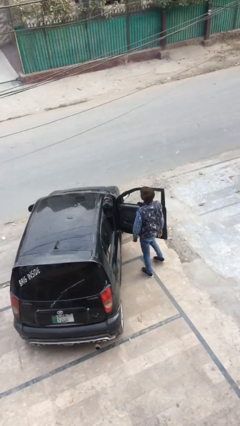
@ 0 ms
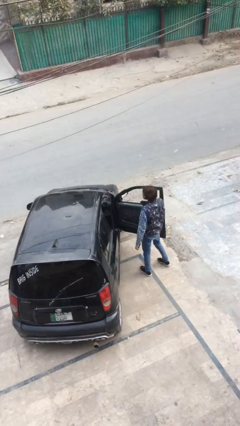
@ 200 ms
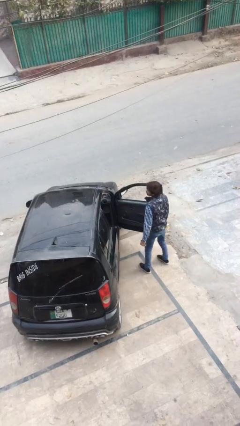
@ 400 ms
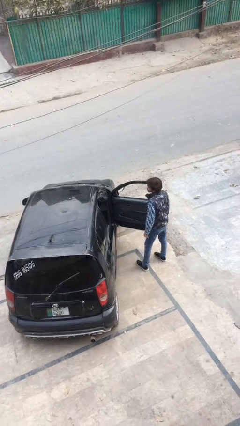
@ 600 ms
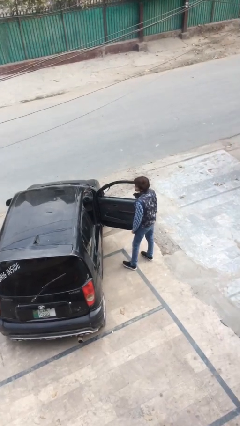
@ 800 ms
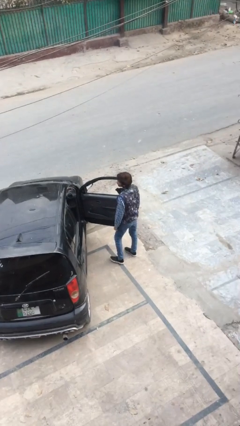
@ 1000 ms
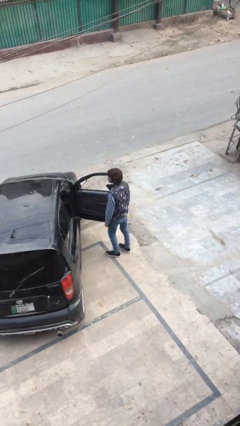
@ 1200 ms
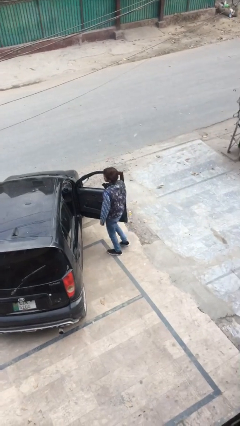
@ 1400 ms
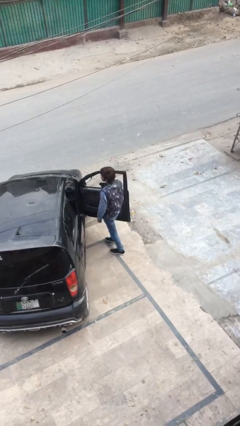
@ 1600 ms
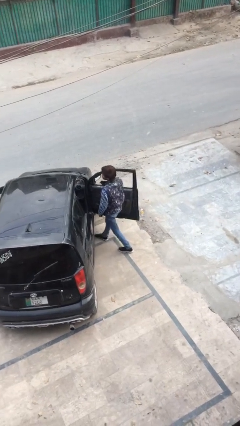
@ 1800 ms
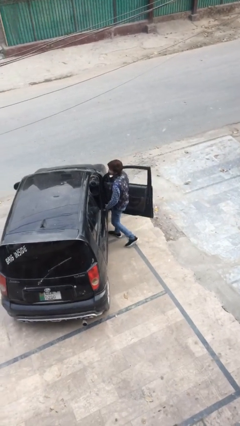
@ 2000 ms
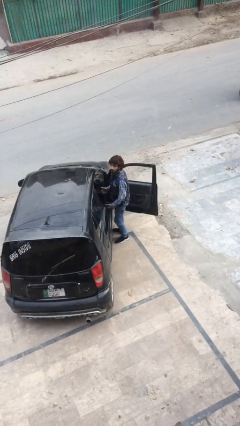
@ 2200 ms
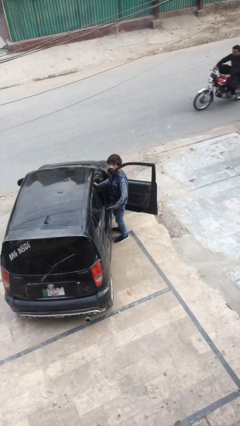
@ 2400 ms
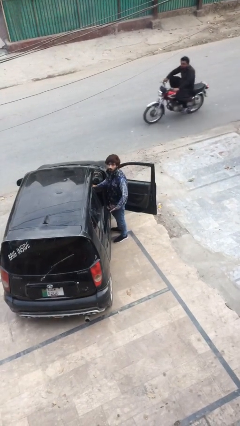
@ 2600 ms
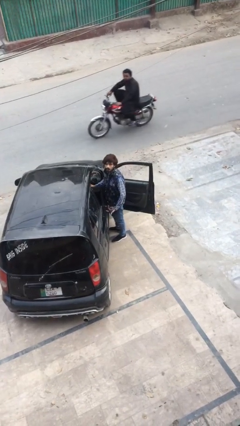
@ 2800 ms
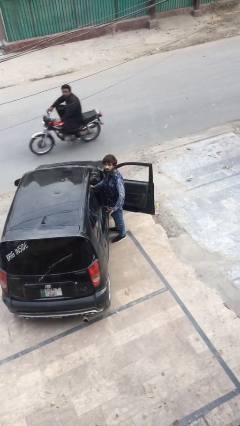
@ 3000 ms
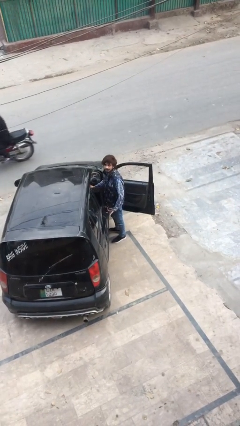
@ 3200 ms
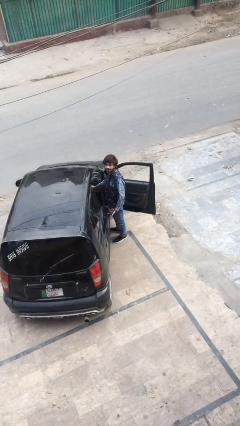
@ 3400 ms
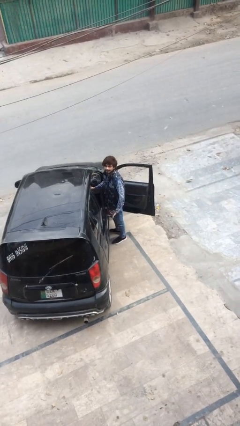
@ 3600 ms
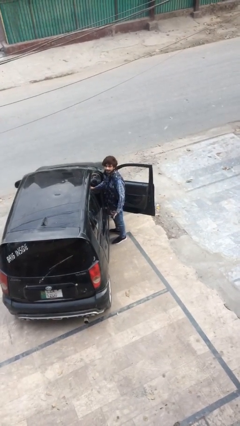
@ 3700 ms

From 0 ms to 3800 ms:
person enters car

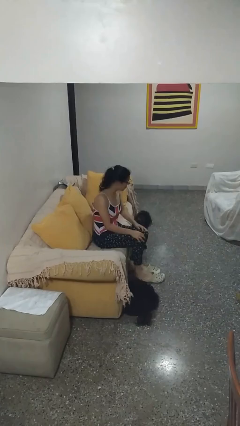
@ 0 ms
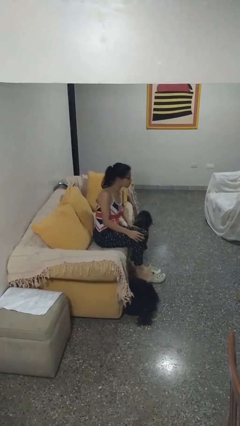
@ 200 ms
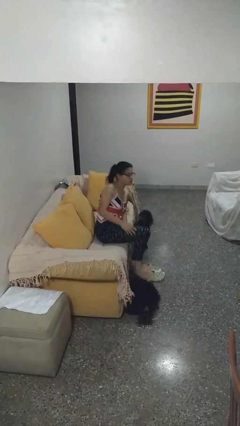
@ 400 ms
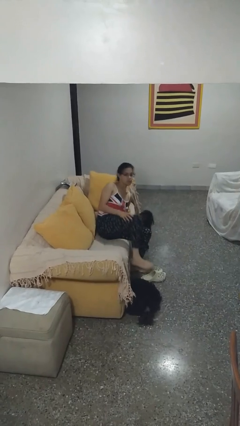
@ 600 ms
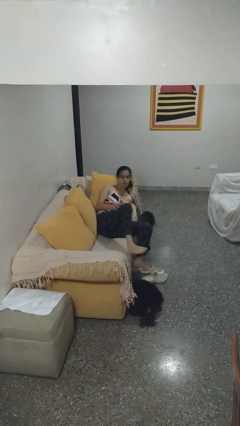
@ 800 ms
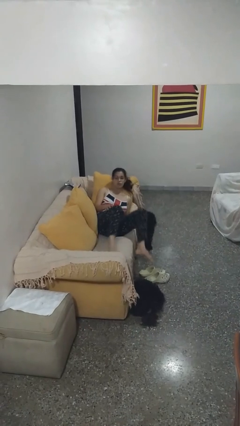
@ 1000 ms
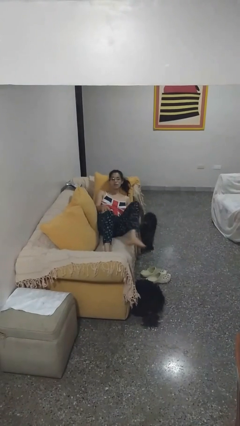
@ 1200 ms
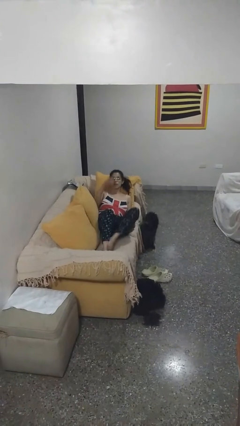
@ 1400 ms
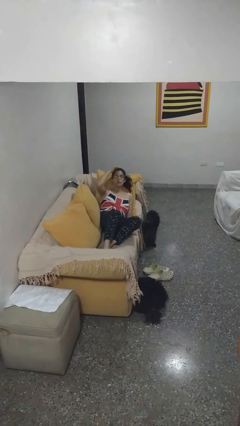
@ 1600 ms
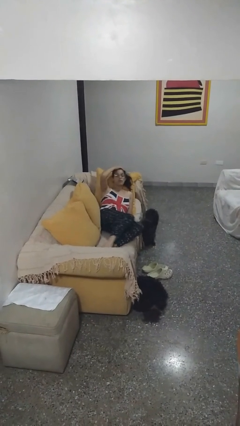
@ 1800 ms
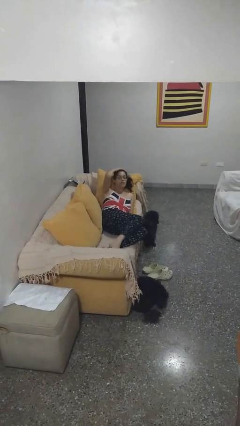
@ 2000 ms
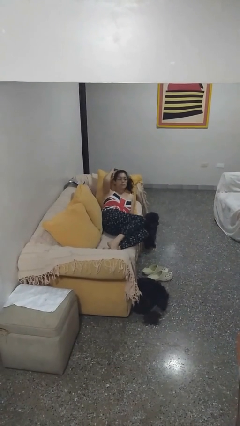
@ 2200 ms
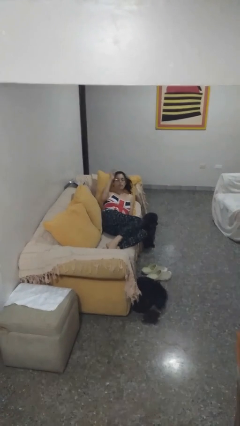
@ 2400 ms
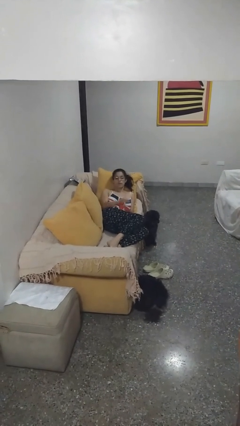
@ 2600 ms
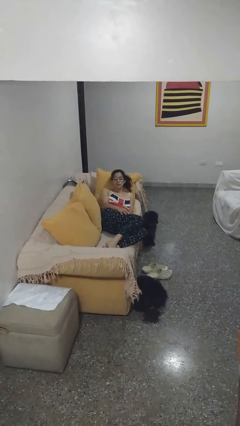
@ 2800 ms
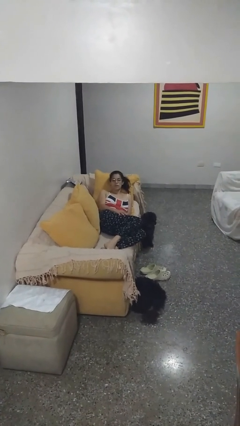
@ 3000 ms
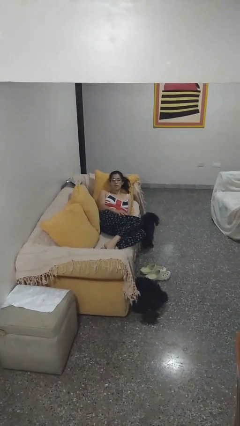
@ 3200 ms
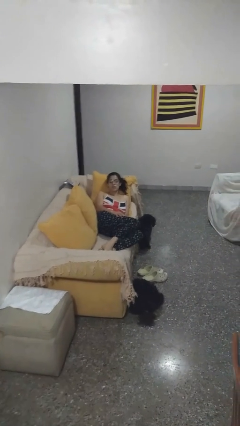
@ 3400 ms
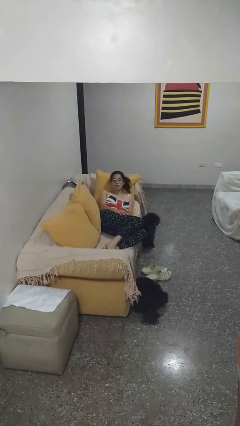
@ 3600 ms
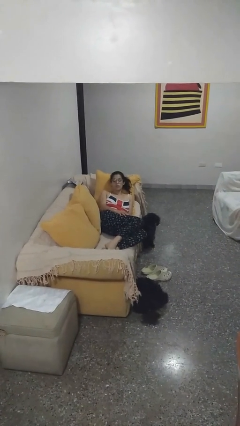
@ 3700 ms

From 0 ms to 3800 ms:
person lies down on couch

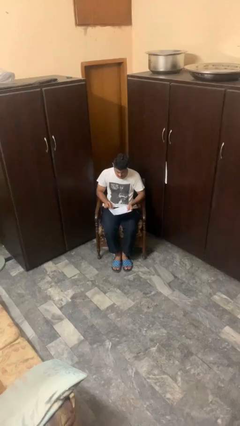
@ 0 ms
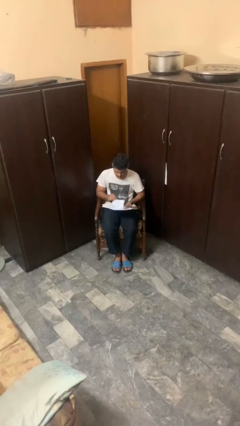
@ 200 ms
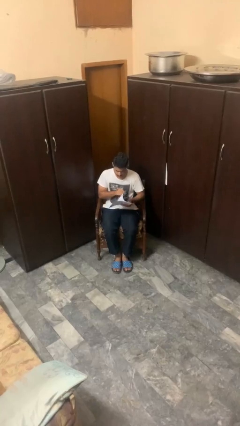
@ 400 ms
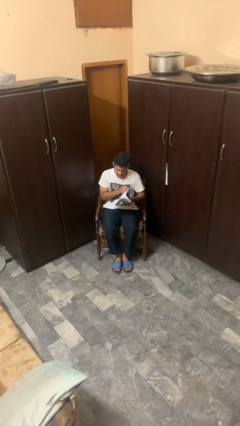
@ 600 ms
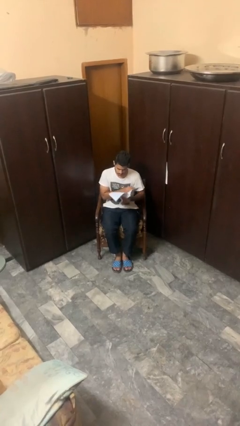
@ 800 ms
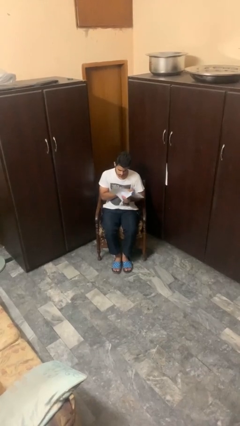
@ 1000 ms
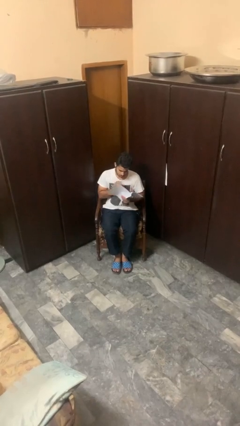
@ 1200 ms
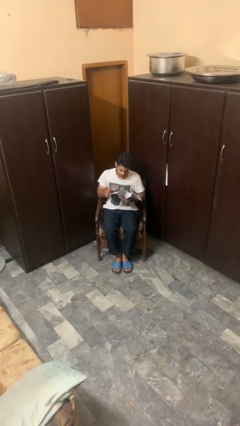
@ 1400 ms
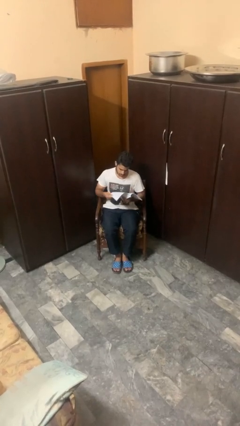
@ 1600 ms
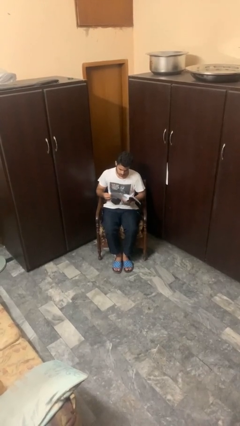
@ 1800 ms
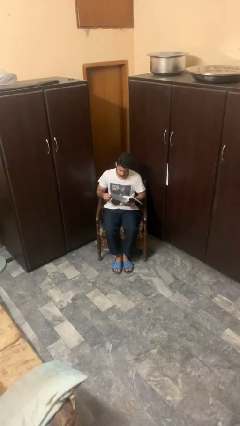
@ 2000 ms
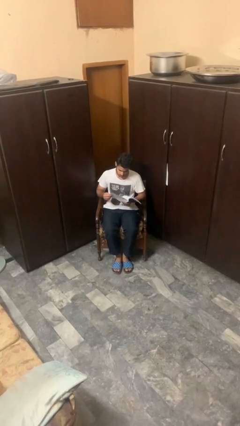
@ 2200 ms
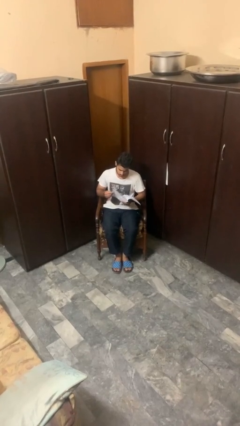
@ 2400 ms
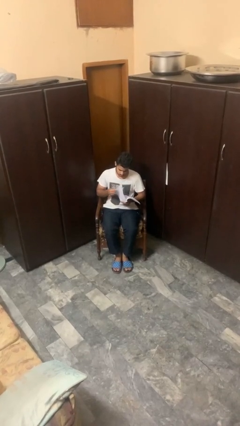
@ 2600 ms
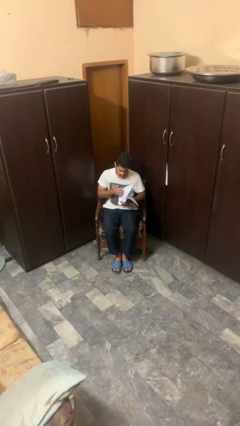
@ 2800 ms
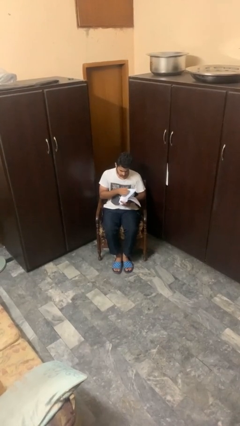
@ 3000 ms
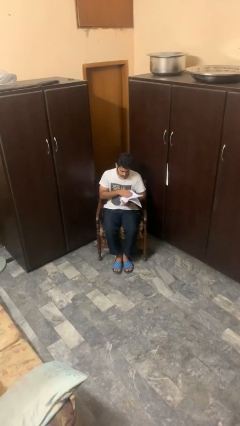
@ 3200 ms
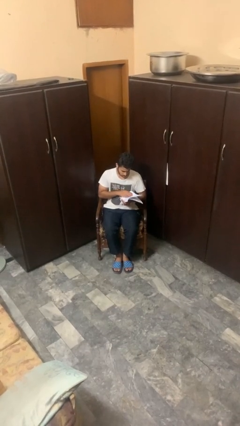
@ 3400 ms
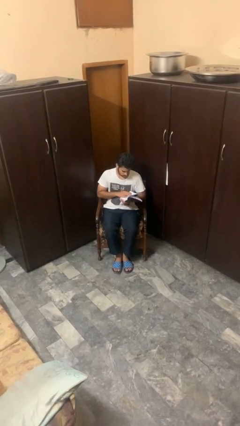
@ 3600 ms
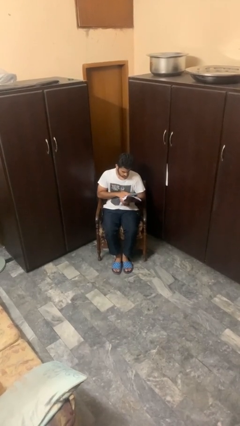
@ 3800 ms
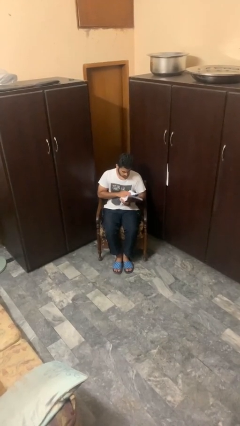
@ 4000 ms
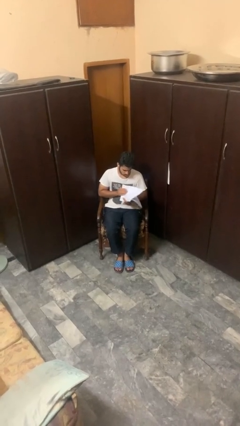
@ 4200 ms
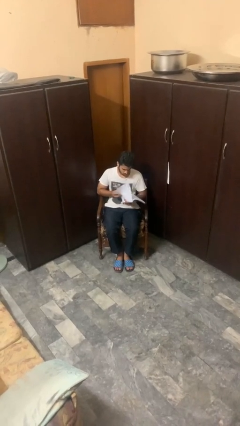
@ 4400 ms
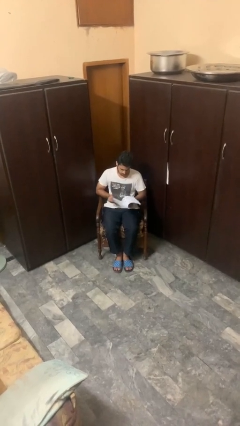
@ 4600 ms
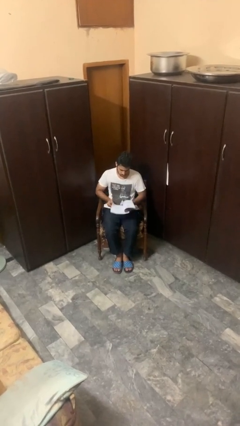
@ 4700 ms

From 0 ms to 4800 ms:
person reads magazine

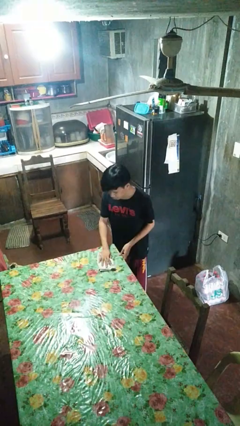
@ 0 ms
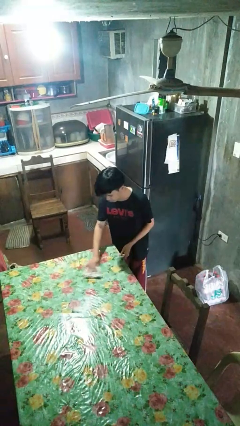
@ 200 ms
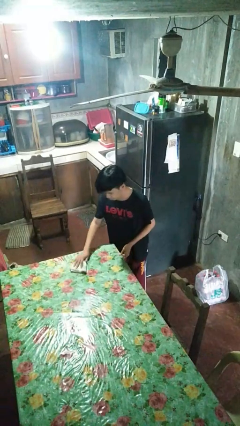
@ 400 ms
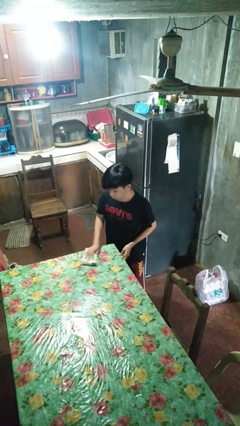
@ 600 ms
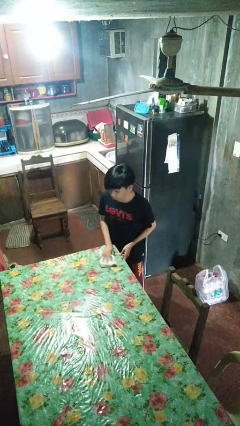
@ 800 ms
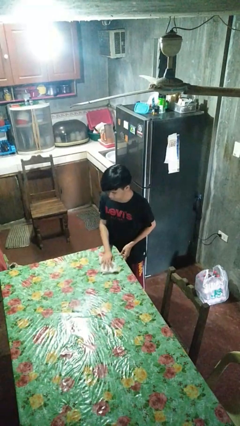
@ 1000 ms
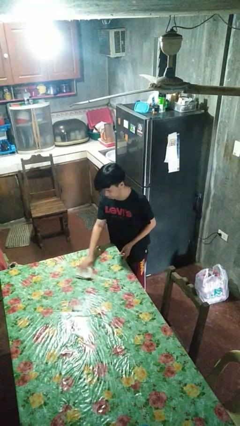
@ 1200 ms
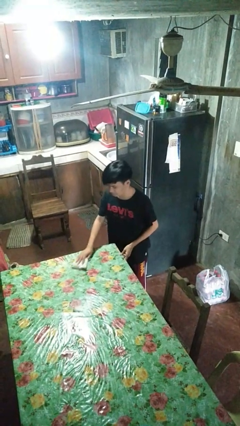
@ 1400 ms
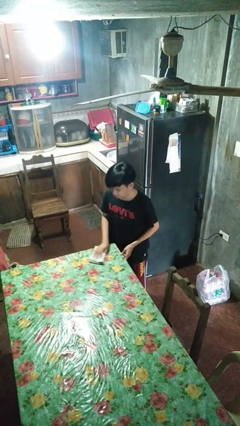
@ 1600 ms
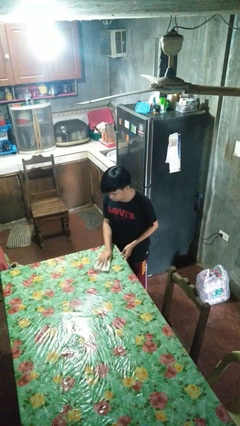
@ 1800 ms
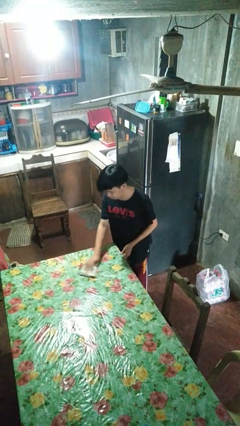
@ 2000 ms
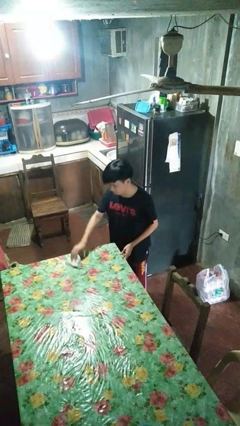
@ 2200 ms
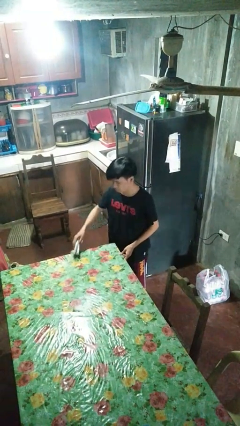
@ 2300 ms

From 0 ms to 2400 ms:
person cleans table with rag

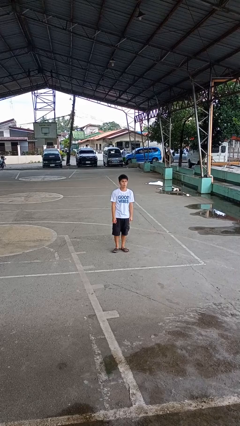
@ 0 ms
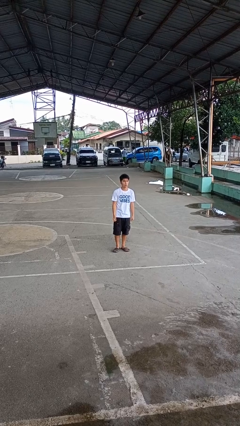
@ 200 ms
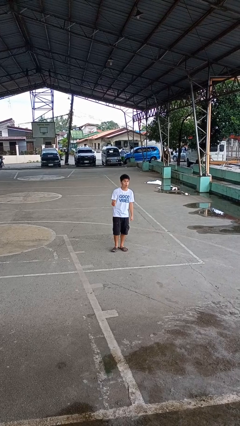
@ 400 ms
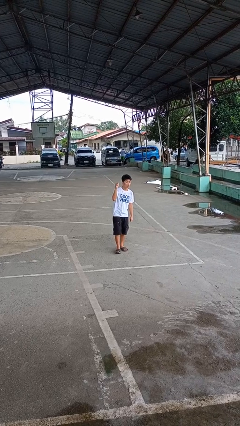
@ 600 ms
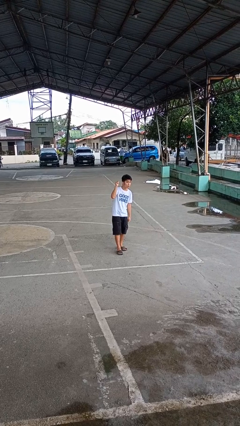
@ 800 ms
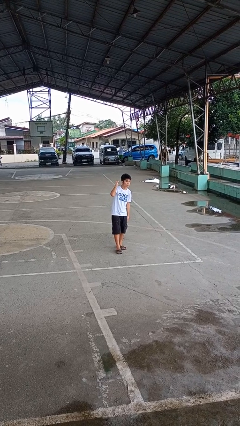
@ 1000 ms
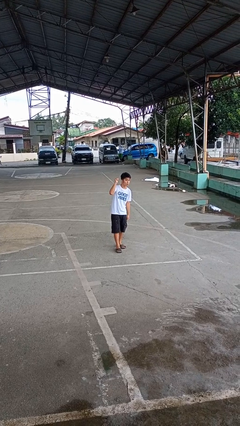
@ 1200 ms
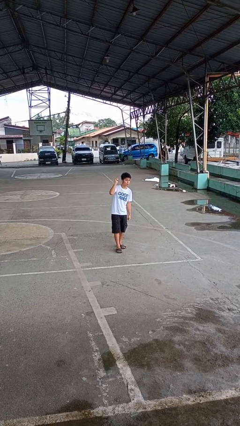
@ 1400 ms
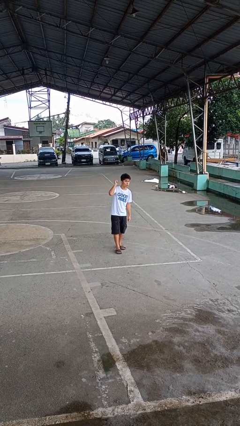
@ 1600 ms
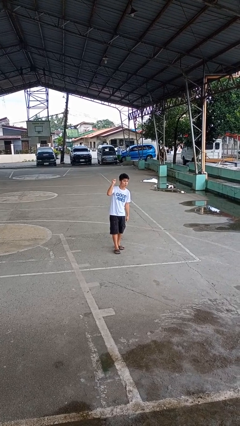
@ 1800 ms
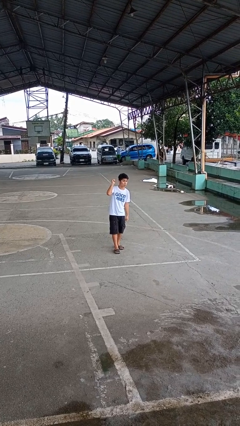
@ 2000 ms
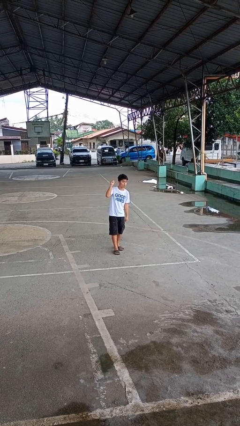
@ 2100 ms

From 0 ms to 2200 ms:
person gestures behind me

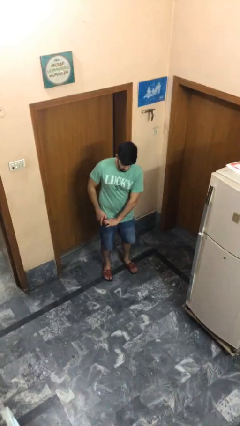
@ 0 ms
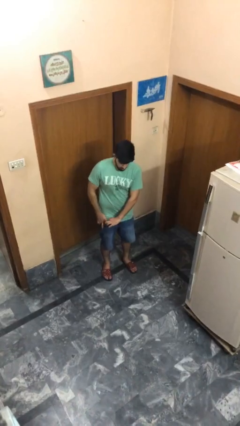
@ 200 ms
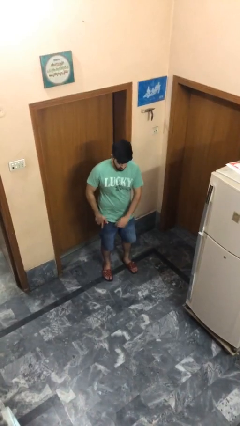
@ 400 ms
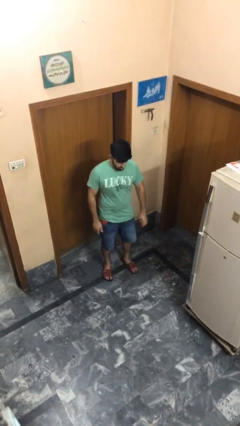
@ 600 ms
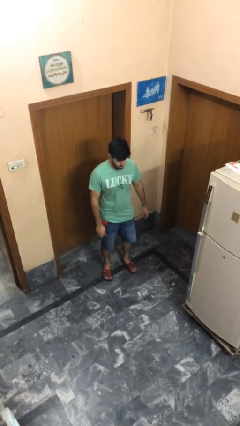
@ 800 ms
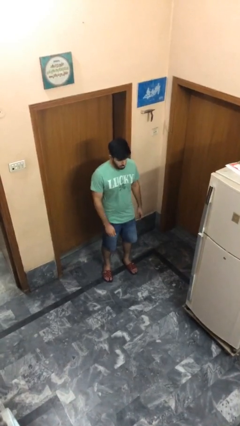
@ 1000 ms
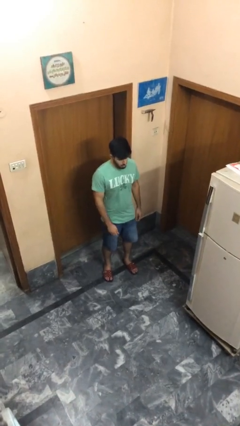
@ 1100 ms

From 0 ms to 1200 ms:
person puts phone into pocket
